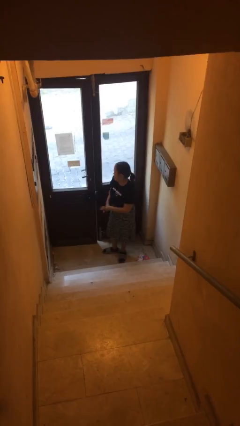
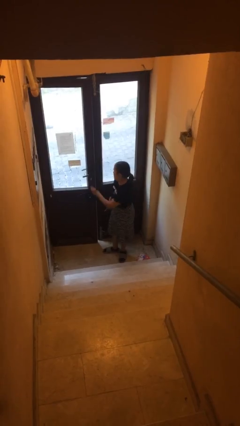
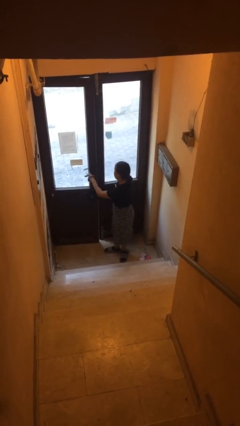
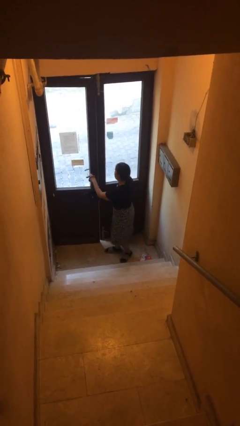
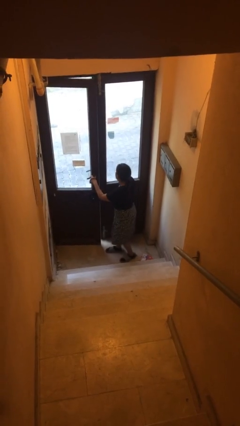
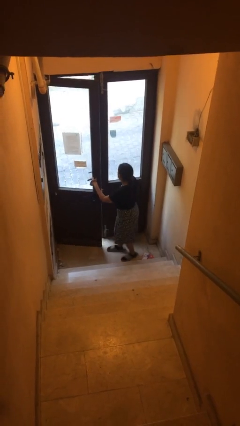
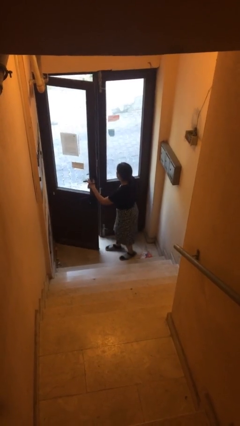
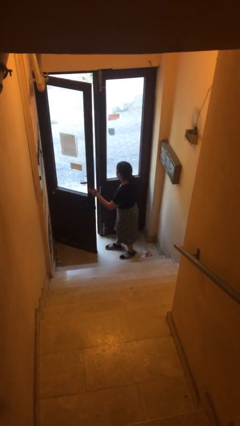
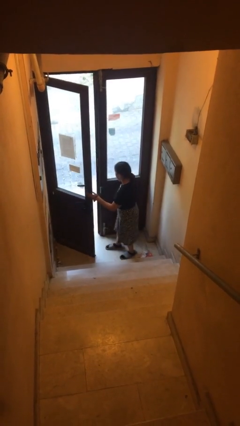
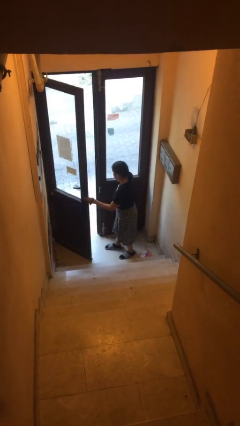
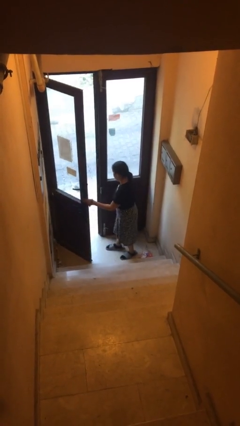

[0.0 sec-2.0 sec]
person opens facility door

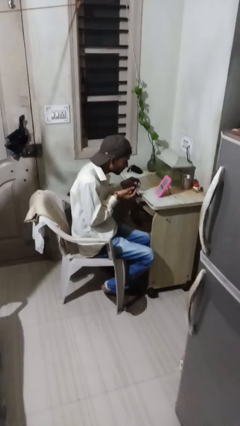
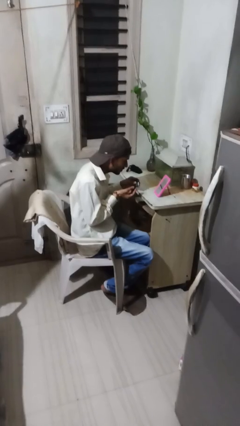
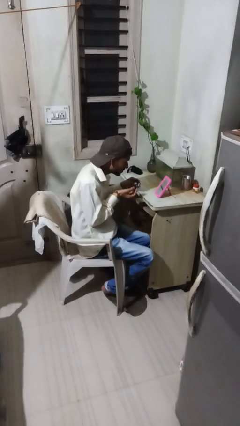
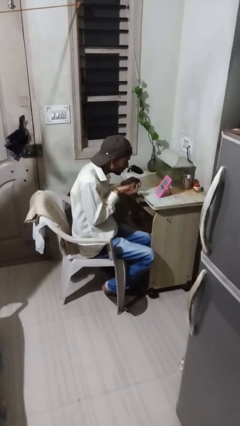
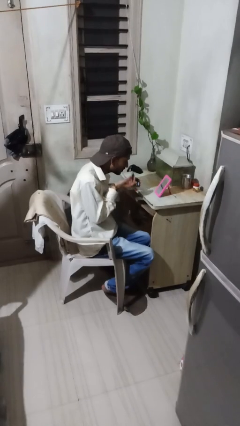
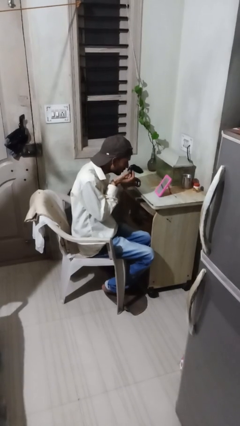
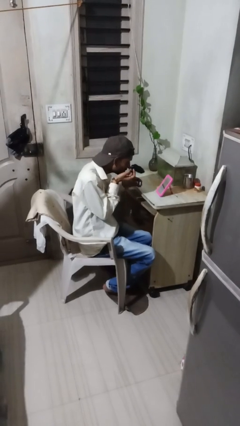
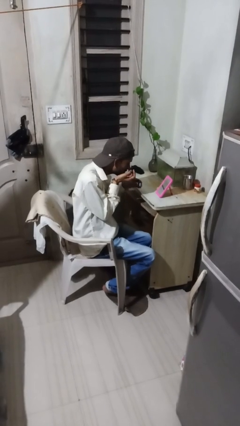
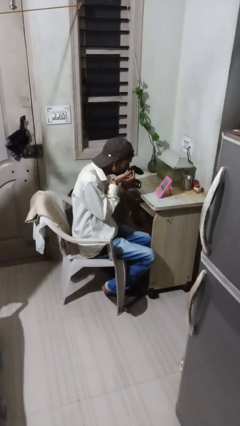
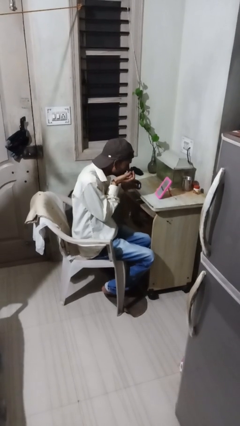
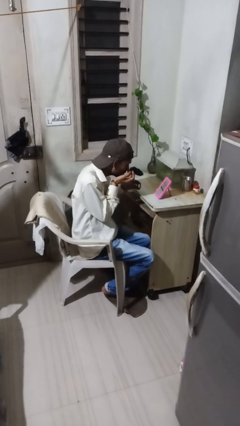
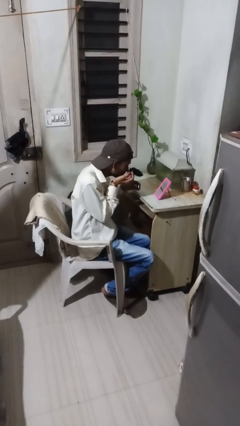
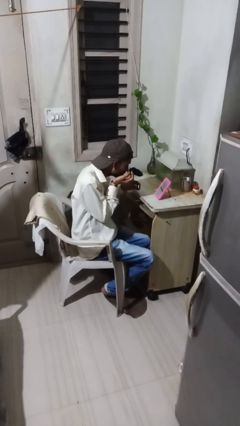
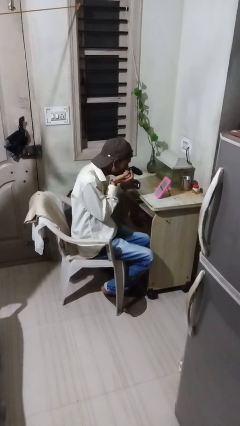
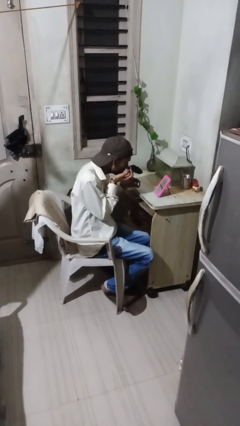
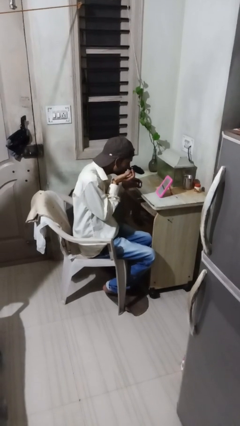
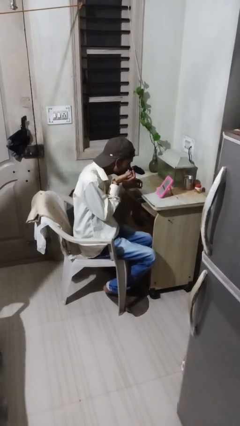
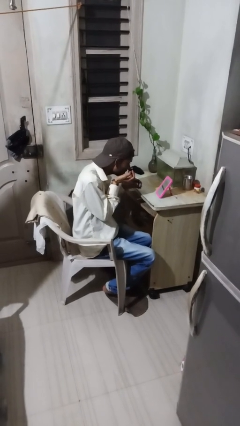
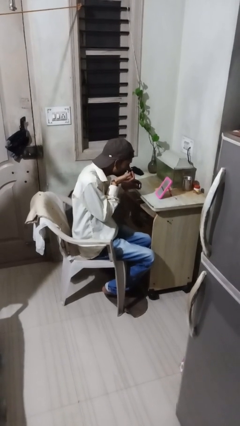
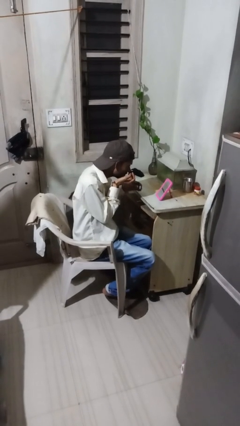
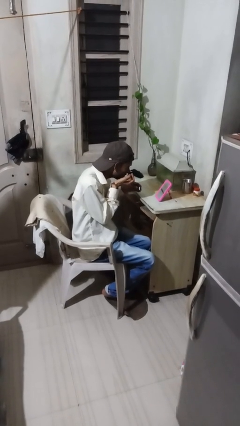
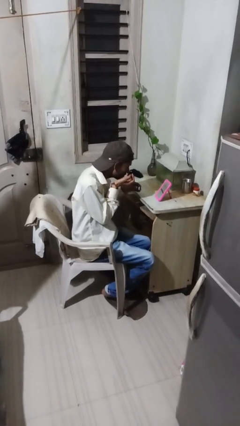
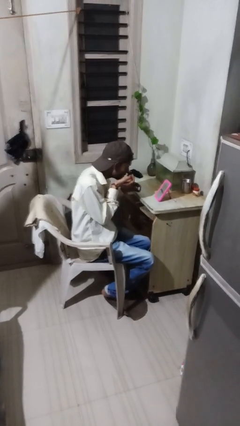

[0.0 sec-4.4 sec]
person applies eye makeup

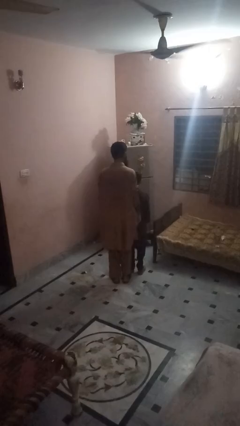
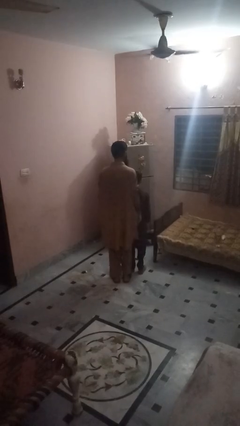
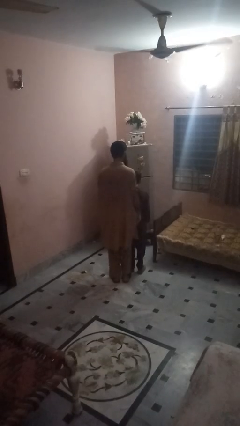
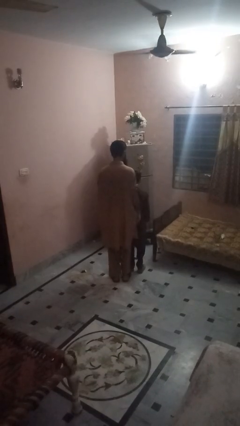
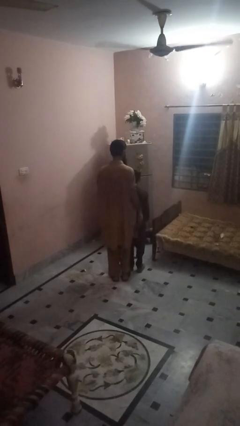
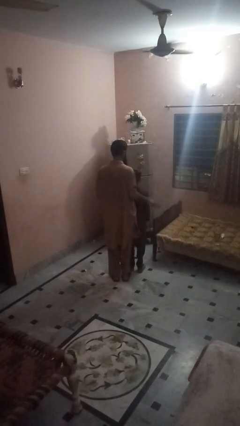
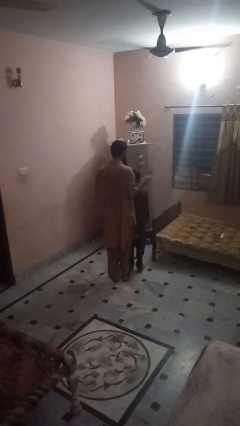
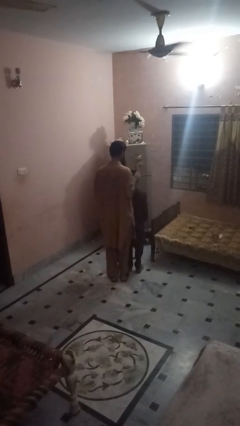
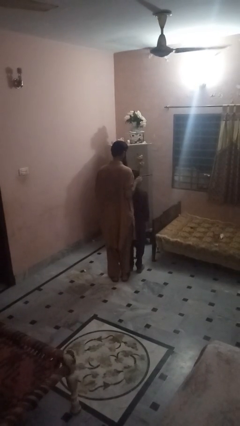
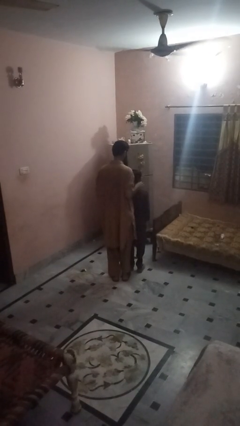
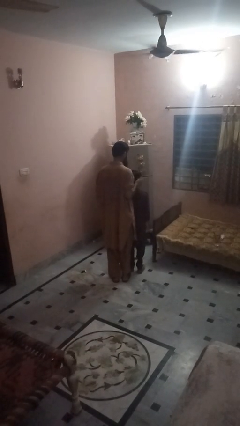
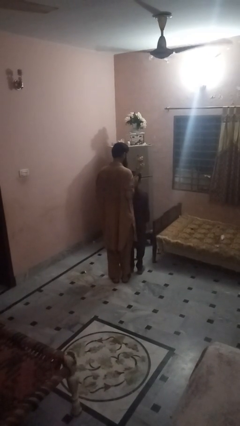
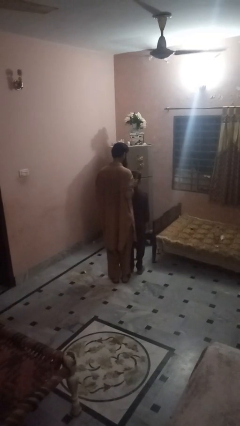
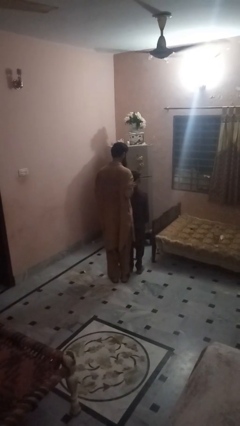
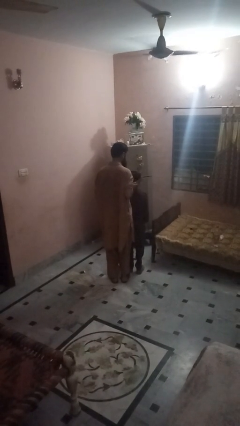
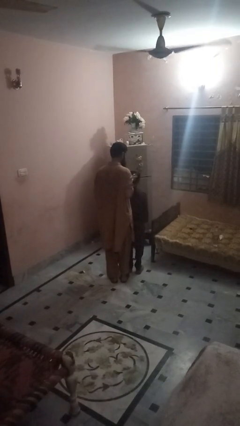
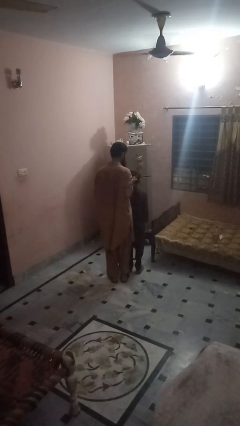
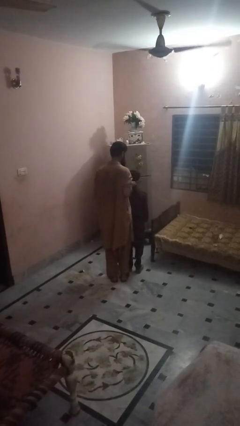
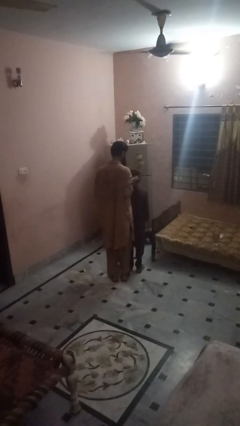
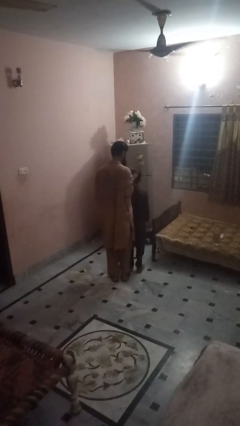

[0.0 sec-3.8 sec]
person brushes hair of person

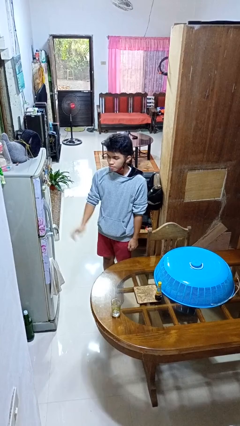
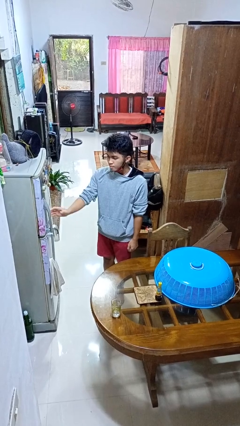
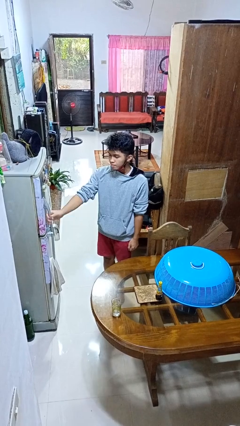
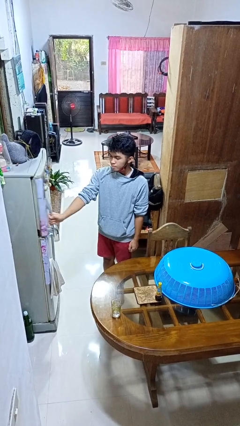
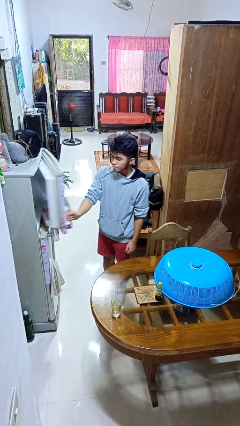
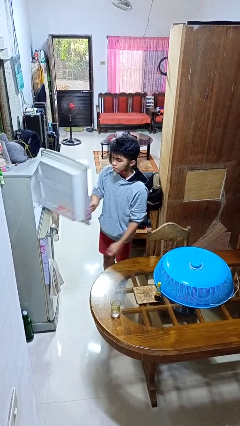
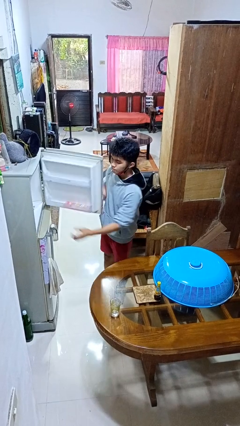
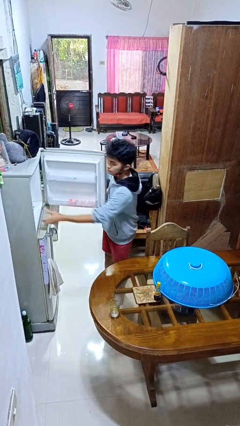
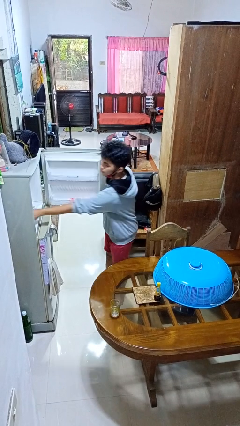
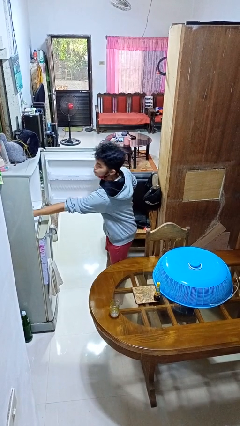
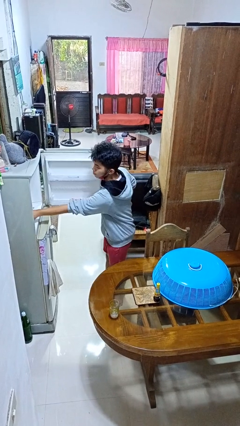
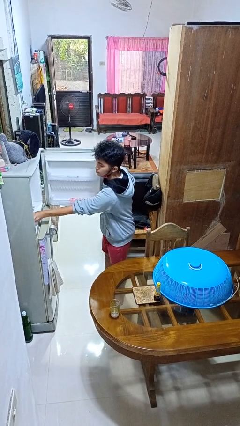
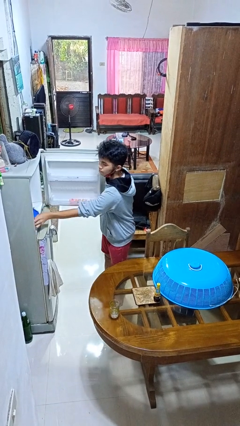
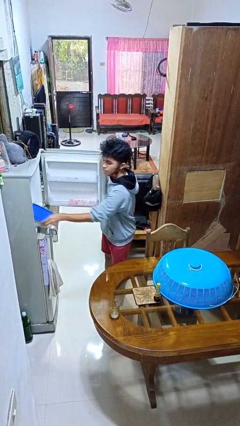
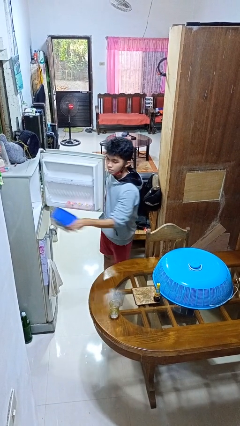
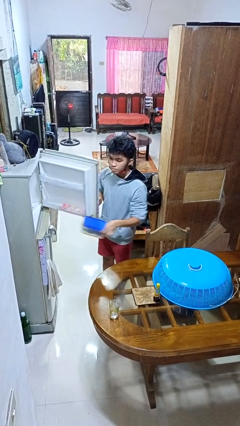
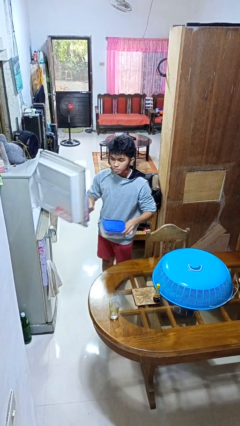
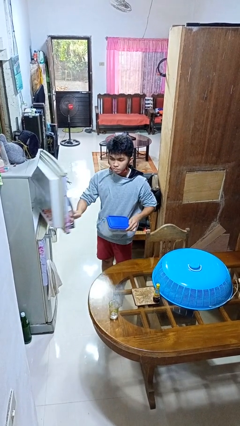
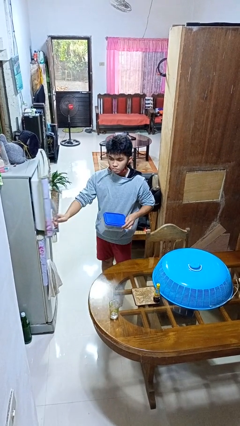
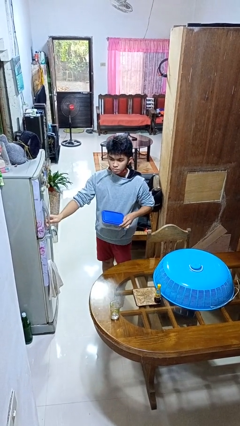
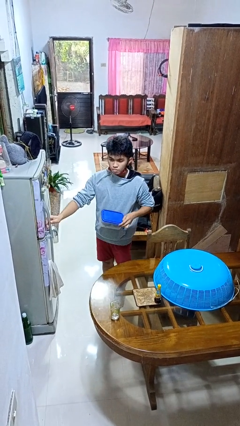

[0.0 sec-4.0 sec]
person takes object from refrigerator

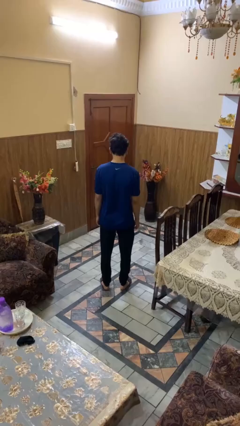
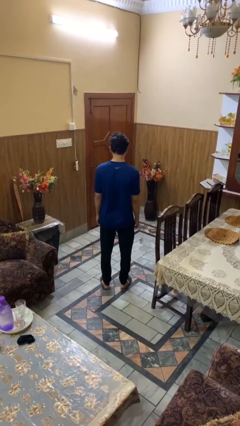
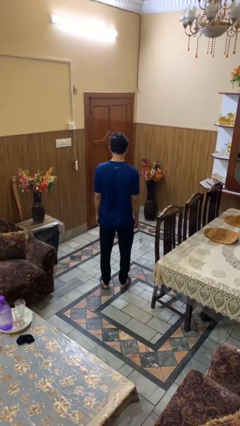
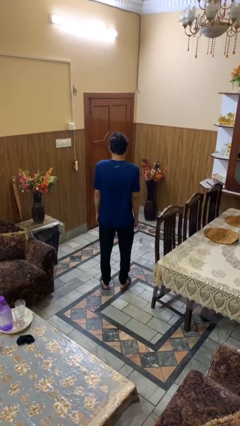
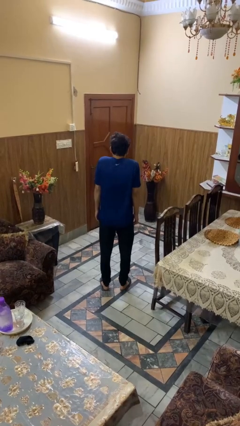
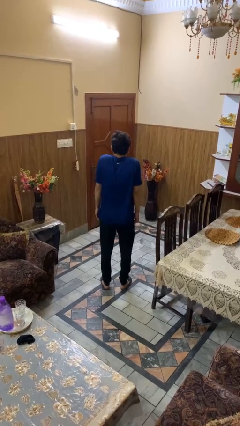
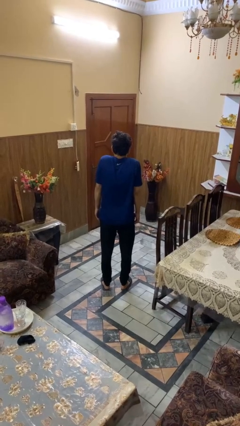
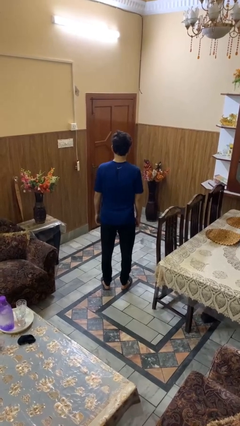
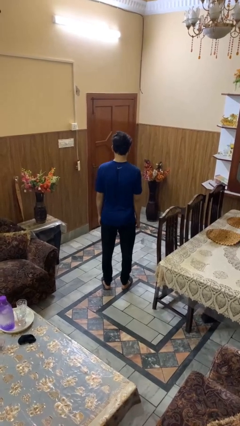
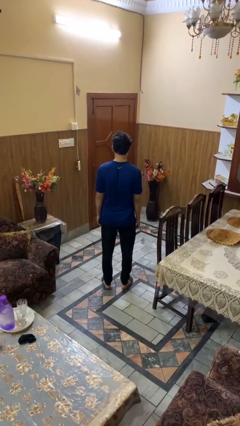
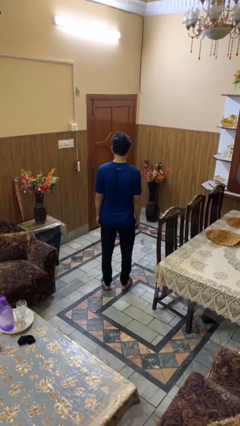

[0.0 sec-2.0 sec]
person shrugs

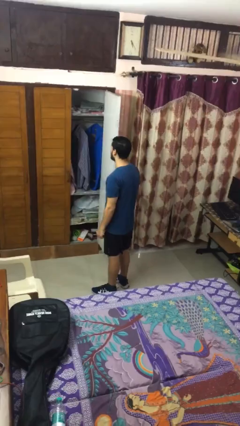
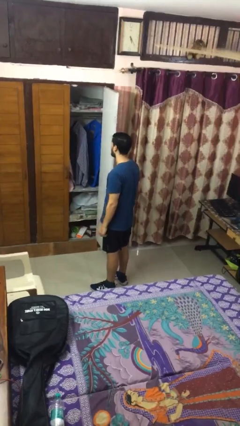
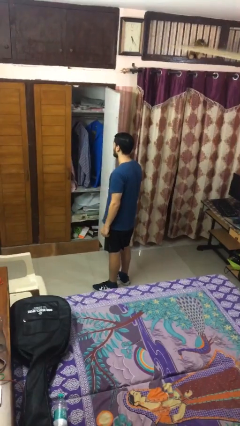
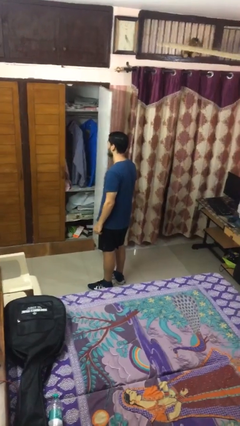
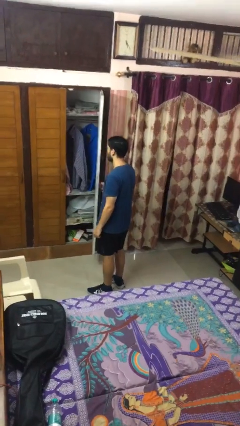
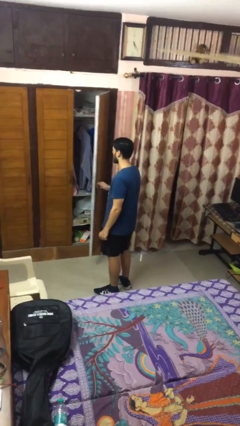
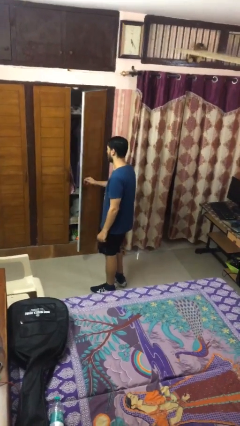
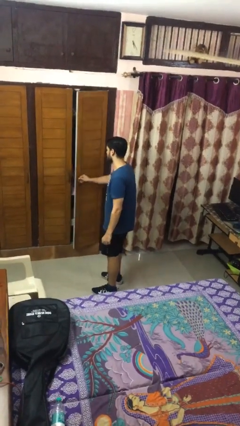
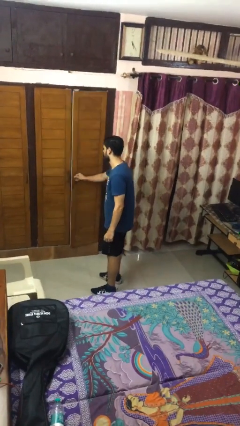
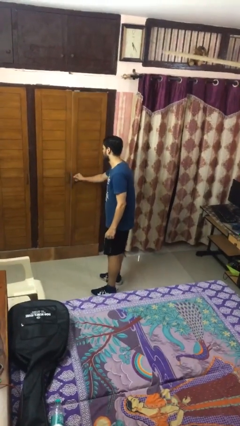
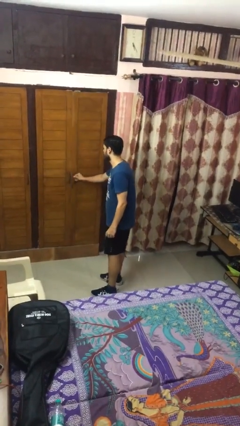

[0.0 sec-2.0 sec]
person closes closet door
